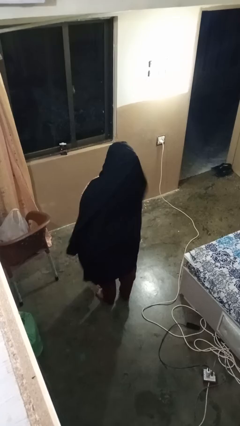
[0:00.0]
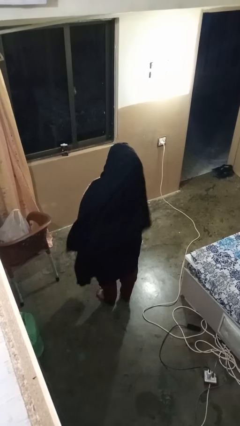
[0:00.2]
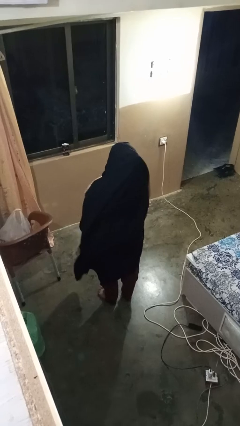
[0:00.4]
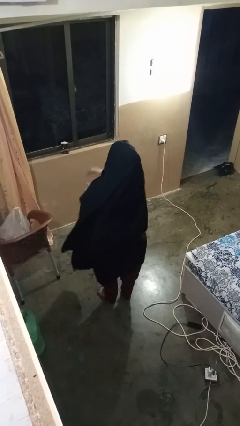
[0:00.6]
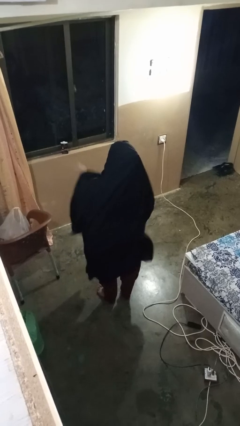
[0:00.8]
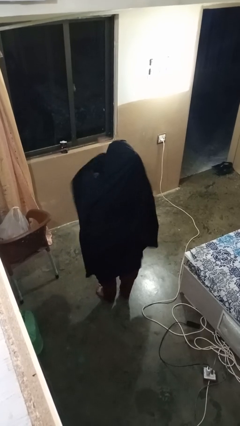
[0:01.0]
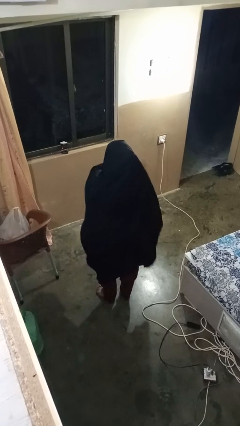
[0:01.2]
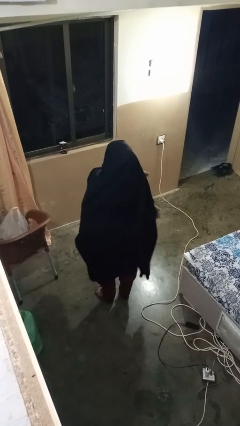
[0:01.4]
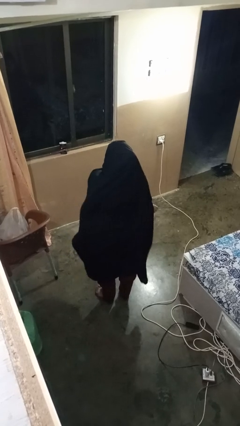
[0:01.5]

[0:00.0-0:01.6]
person gestures swipe right

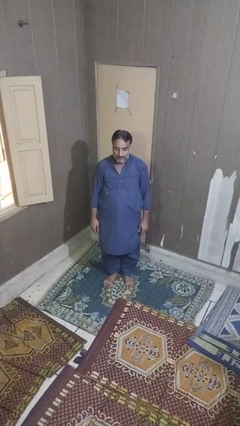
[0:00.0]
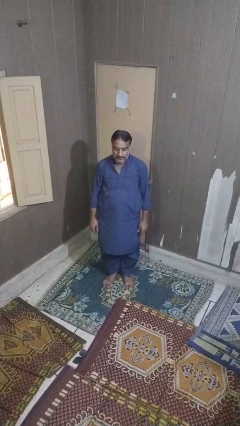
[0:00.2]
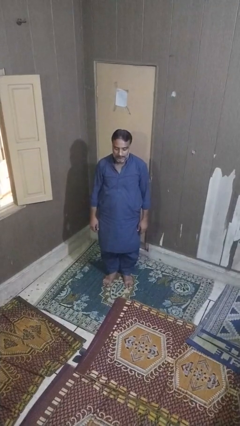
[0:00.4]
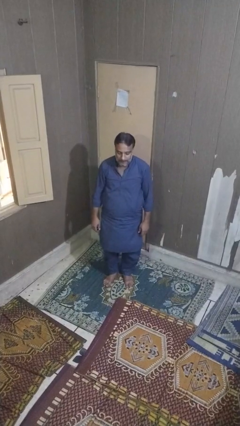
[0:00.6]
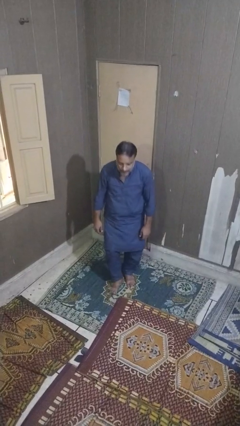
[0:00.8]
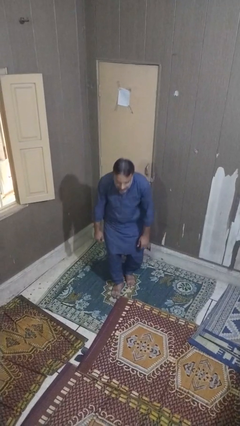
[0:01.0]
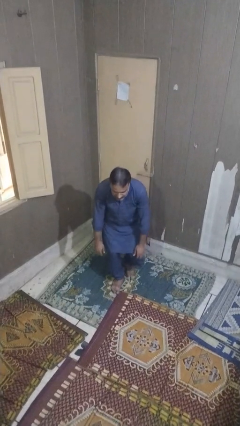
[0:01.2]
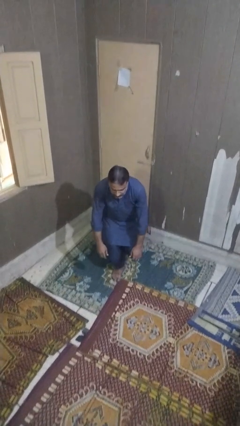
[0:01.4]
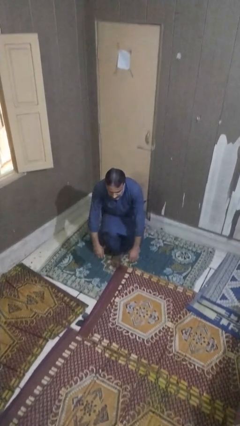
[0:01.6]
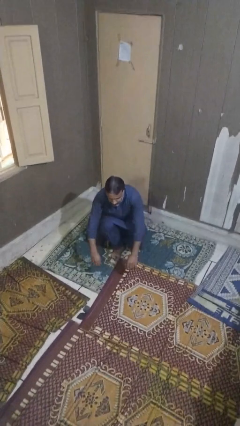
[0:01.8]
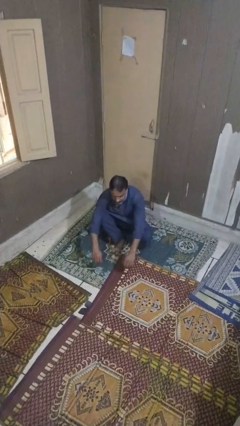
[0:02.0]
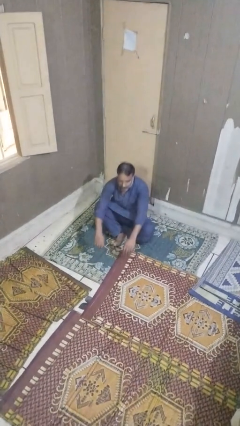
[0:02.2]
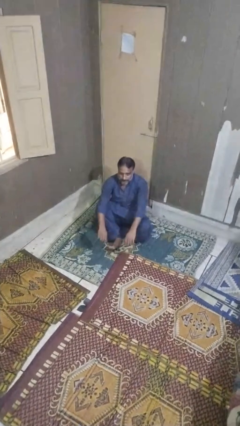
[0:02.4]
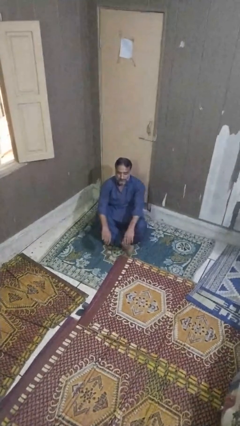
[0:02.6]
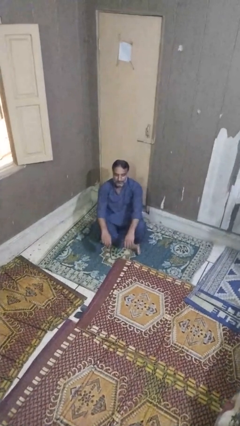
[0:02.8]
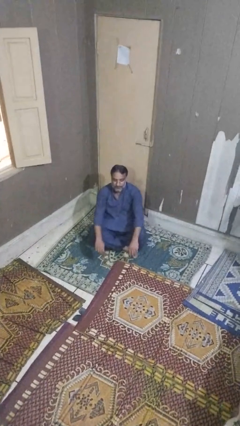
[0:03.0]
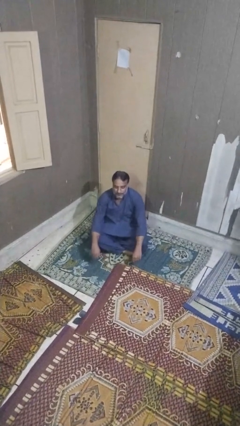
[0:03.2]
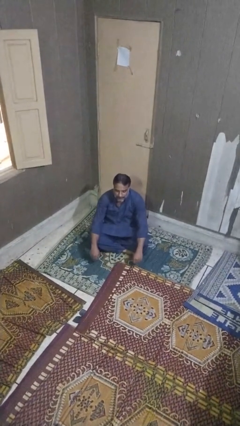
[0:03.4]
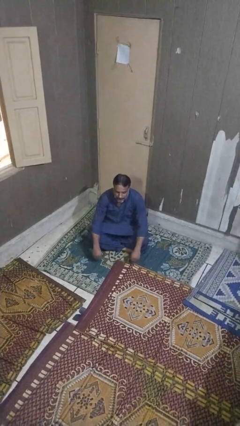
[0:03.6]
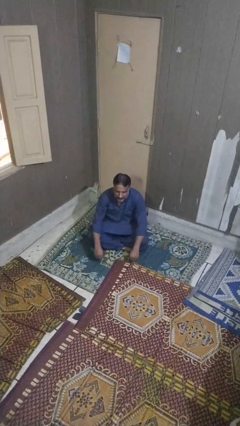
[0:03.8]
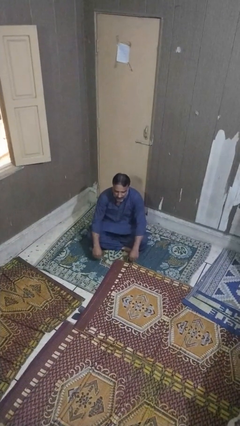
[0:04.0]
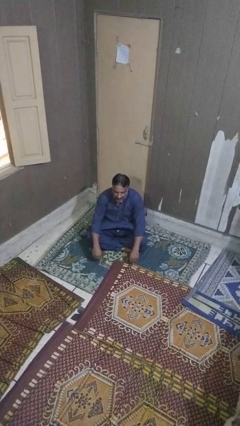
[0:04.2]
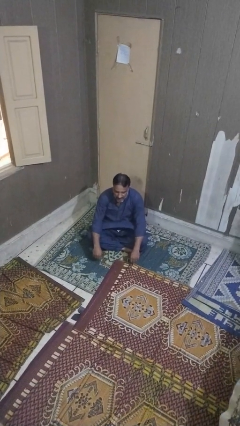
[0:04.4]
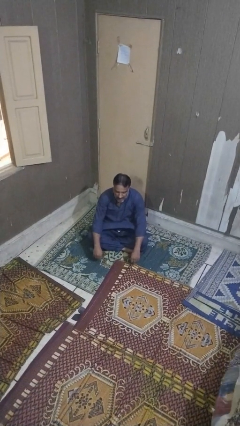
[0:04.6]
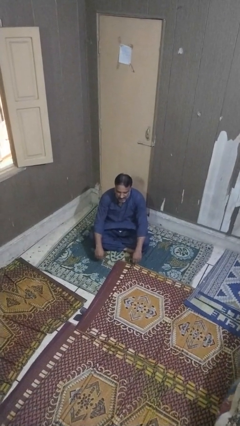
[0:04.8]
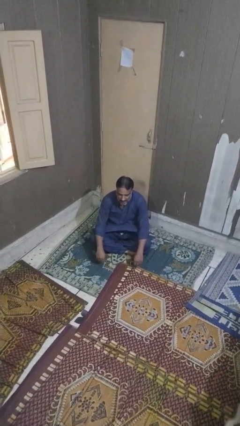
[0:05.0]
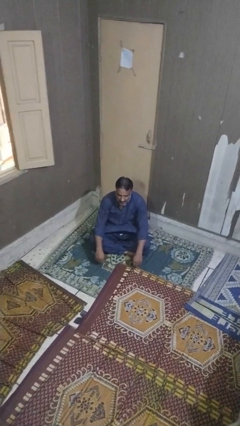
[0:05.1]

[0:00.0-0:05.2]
person sits crisscross

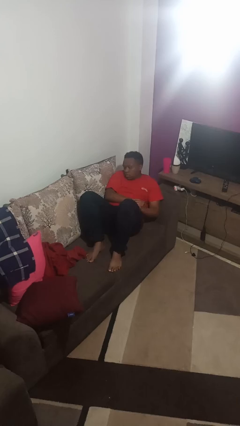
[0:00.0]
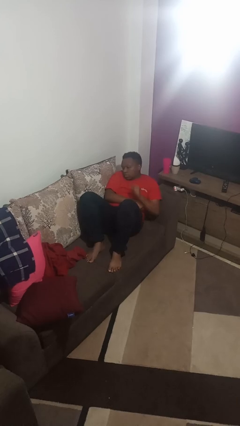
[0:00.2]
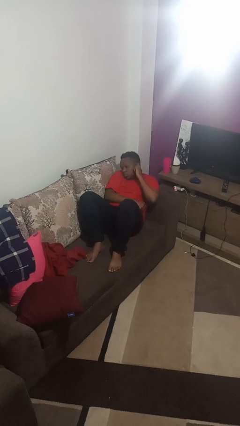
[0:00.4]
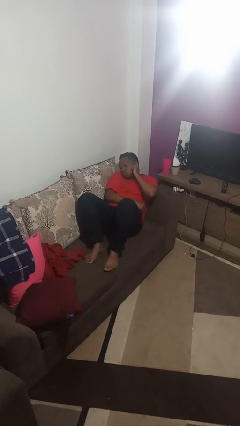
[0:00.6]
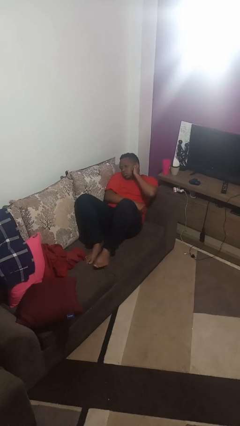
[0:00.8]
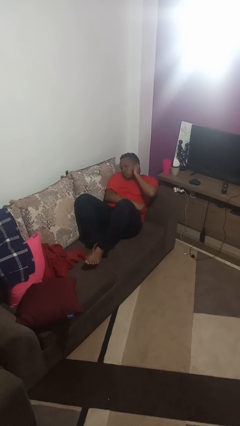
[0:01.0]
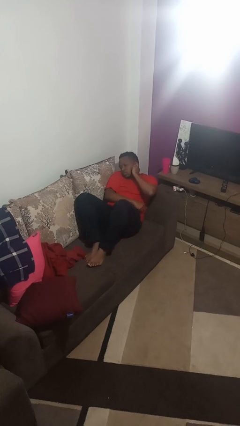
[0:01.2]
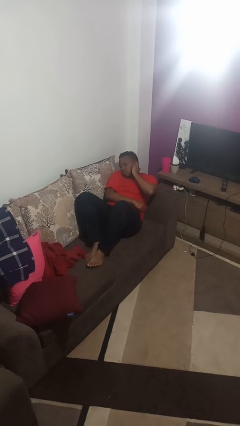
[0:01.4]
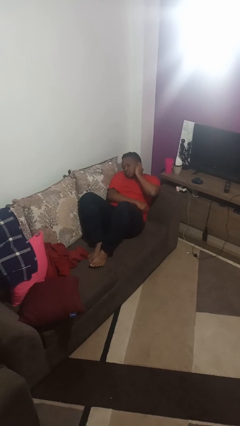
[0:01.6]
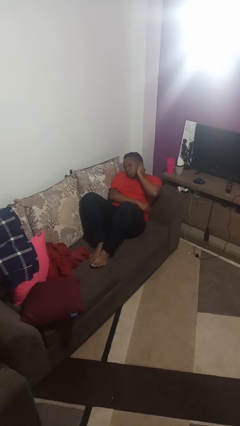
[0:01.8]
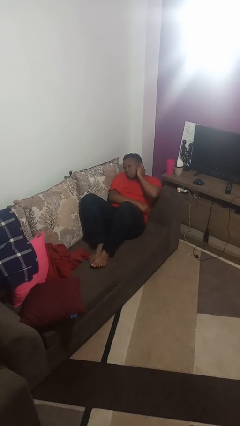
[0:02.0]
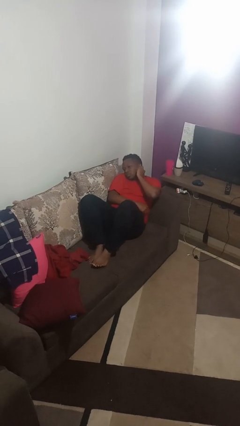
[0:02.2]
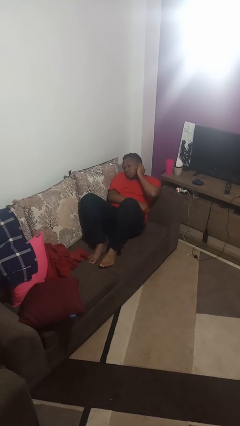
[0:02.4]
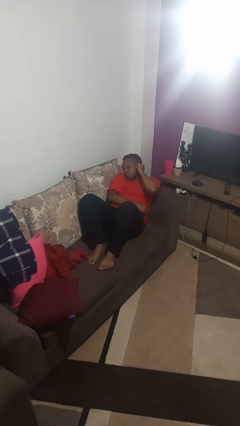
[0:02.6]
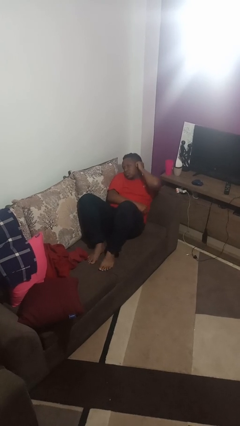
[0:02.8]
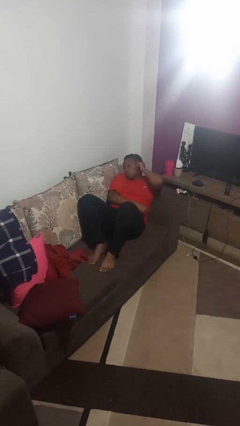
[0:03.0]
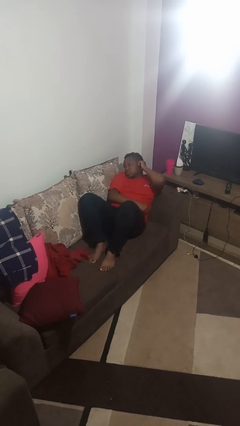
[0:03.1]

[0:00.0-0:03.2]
person touches earlobe

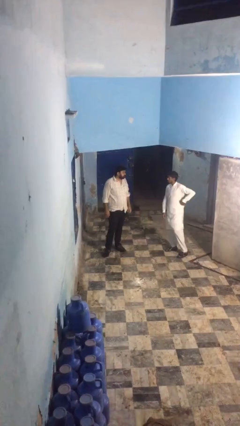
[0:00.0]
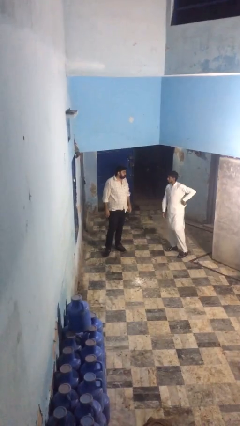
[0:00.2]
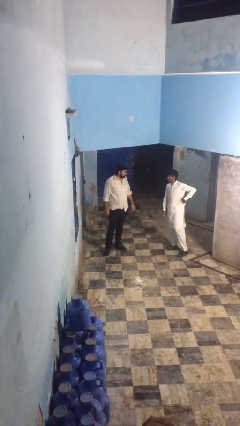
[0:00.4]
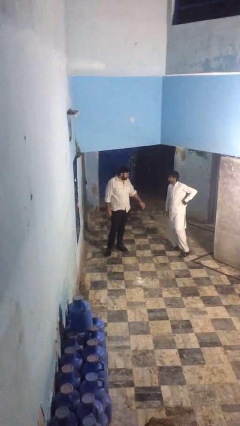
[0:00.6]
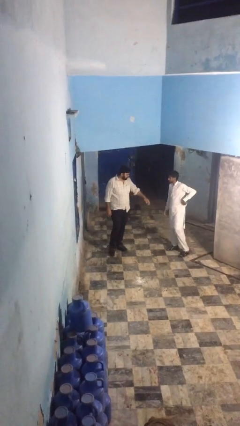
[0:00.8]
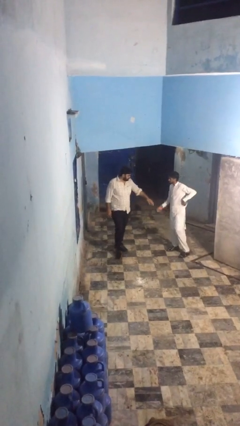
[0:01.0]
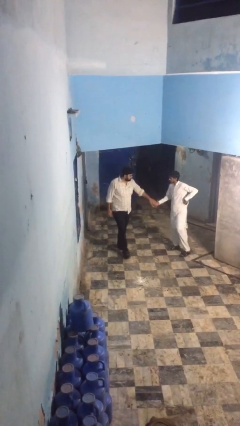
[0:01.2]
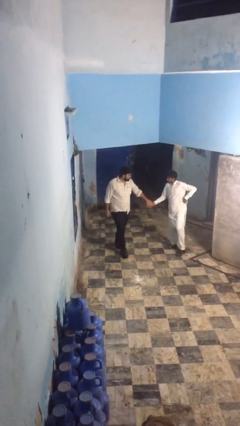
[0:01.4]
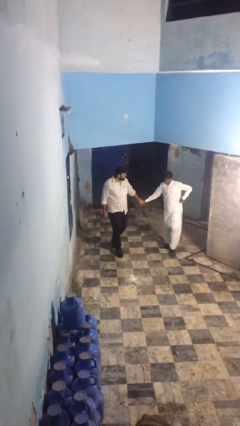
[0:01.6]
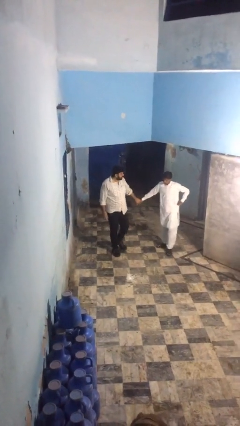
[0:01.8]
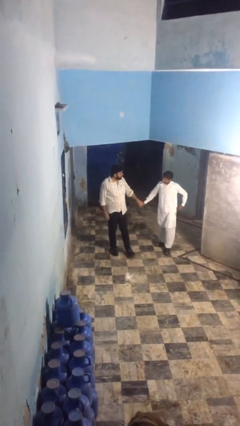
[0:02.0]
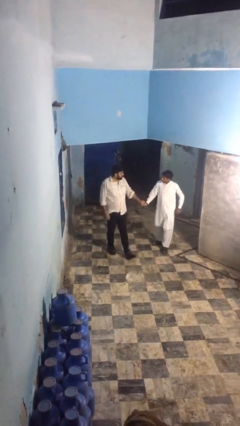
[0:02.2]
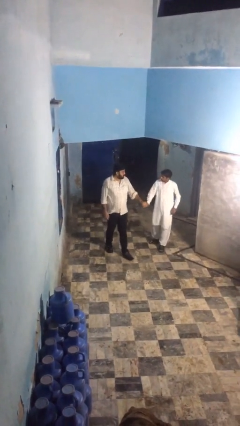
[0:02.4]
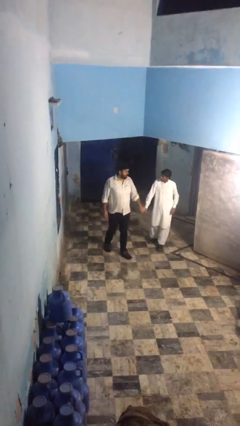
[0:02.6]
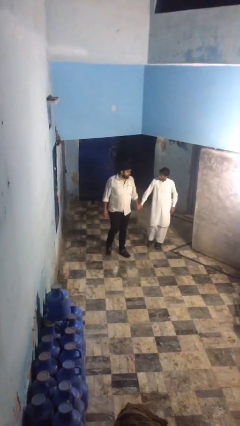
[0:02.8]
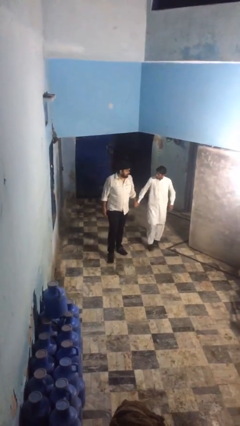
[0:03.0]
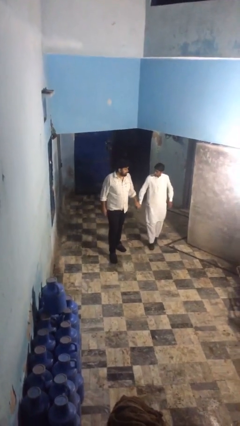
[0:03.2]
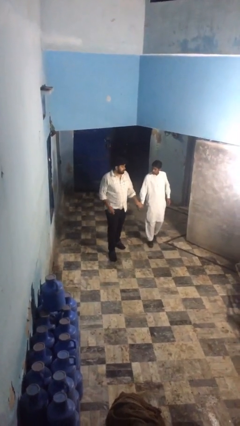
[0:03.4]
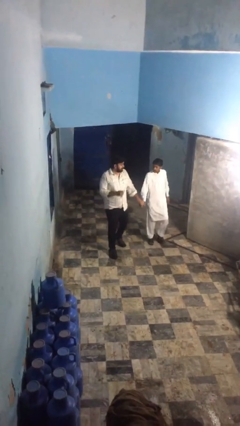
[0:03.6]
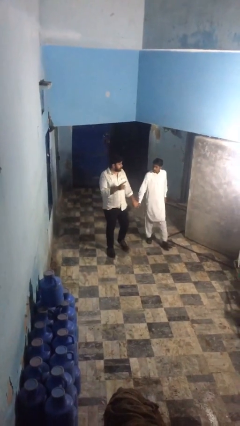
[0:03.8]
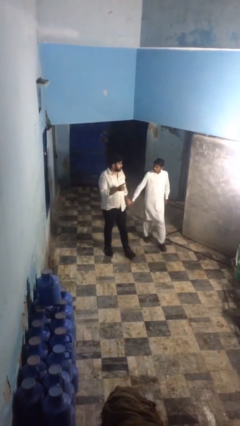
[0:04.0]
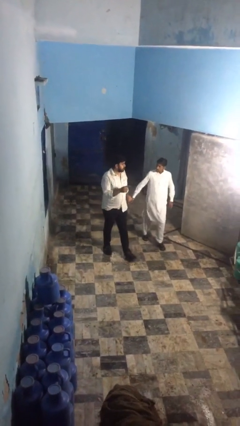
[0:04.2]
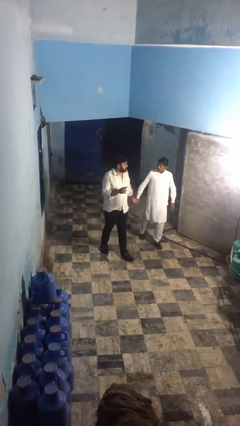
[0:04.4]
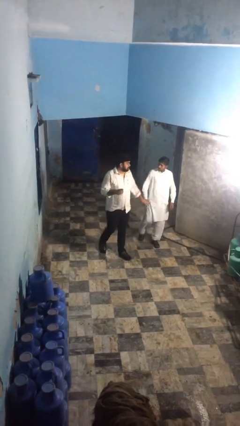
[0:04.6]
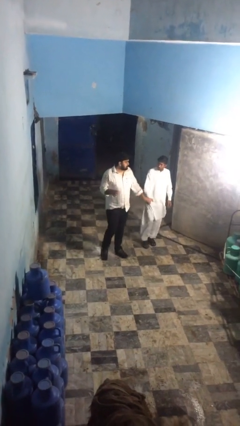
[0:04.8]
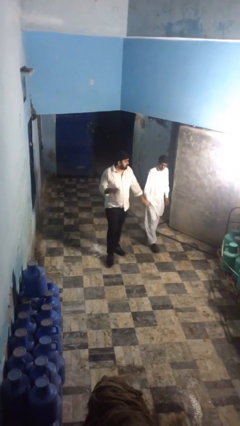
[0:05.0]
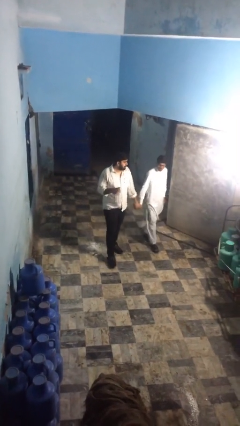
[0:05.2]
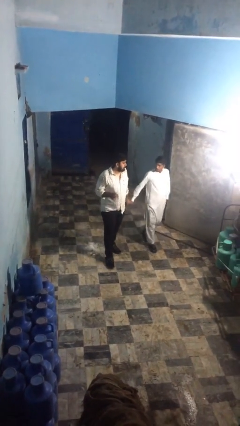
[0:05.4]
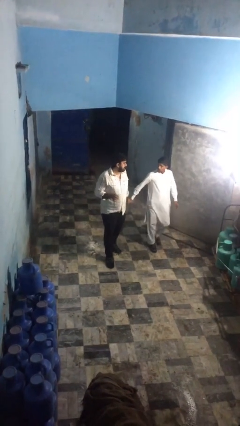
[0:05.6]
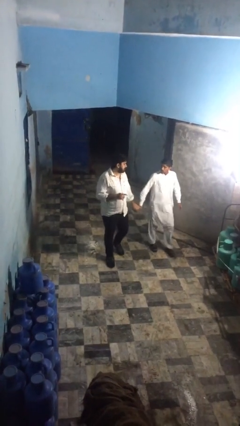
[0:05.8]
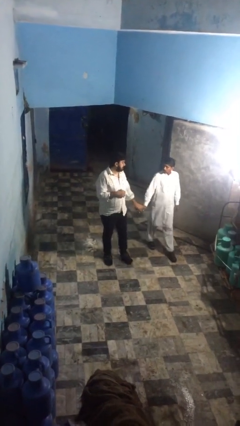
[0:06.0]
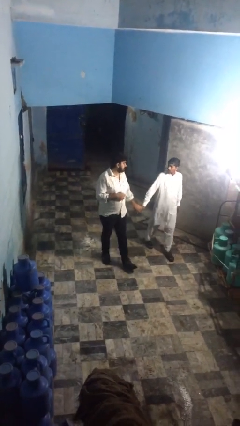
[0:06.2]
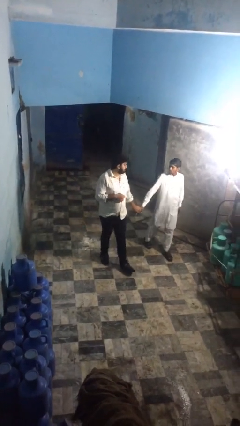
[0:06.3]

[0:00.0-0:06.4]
person holds hand

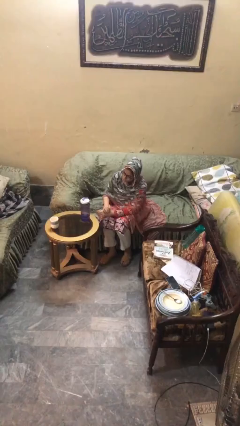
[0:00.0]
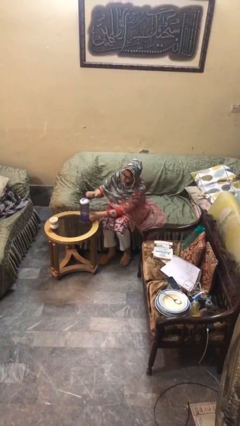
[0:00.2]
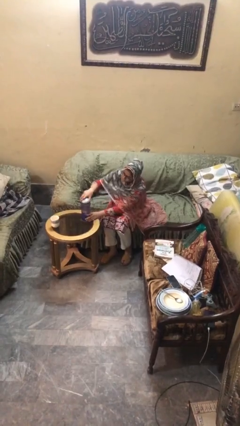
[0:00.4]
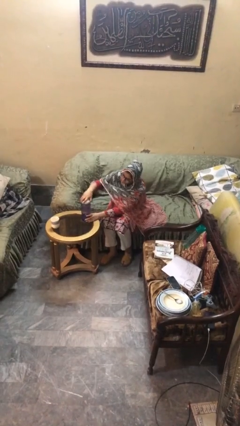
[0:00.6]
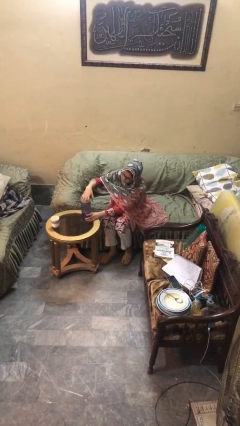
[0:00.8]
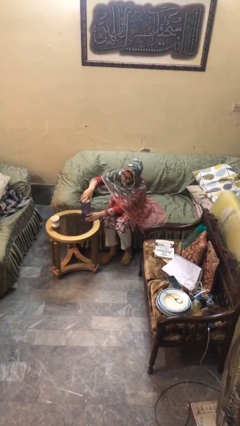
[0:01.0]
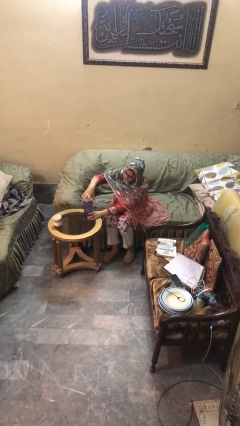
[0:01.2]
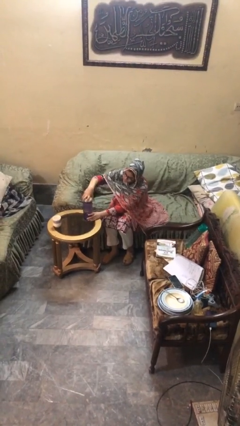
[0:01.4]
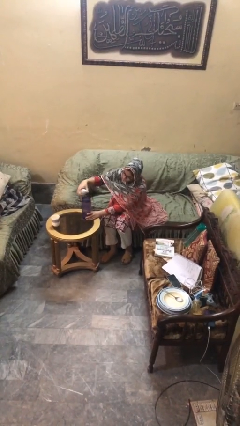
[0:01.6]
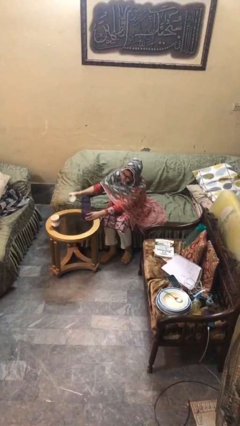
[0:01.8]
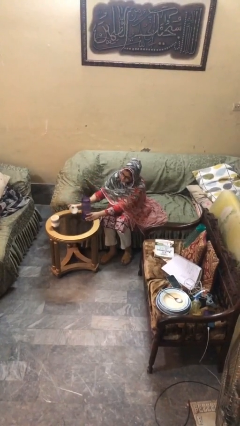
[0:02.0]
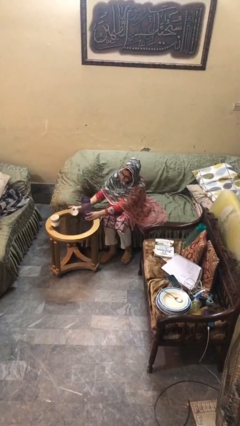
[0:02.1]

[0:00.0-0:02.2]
person unscrews lid from bottle
